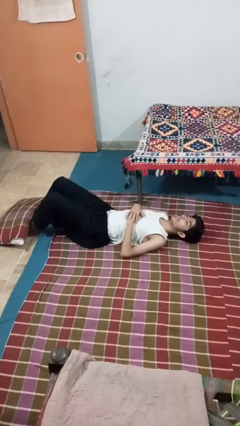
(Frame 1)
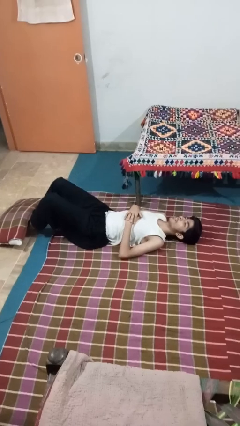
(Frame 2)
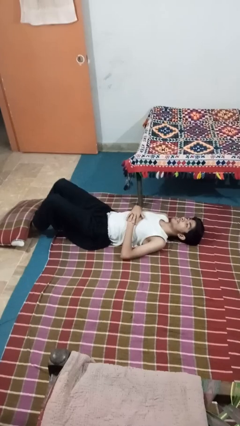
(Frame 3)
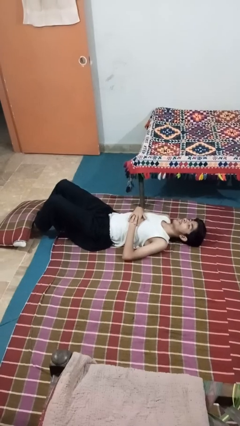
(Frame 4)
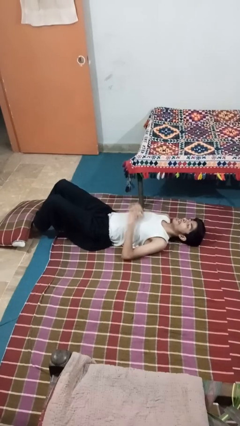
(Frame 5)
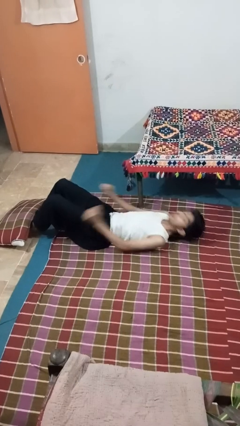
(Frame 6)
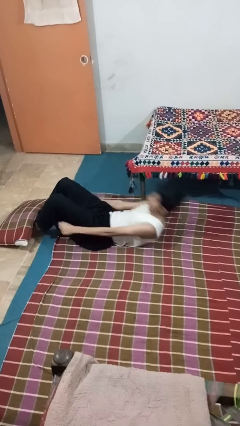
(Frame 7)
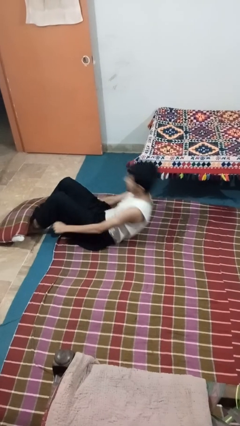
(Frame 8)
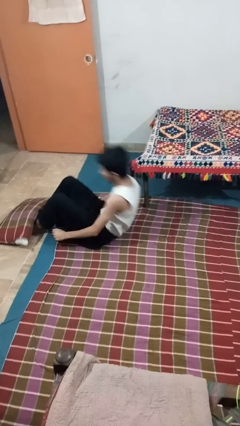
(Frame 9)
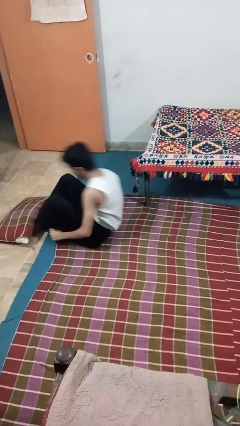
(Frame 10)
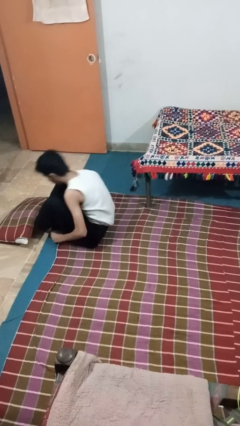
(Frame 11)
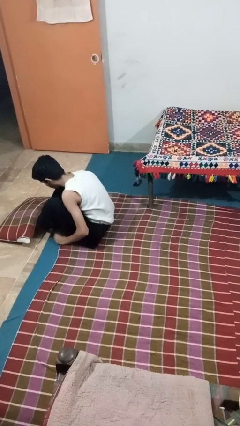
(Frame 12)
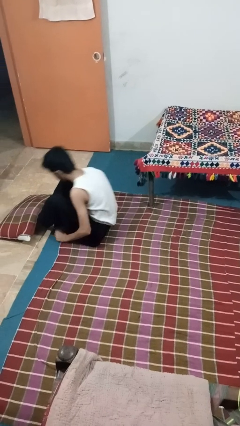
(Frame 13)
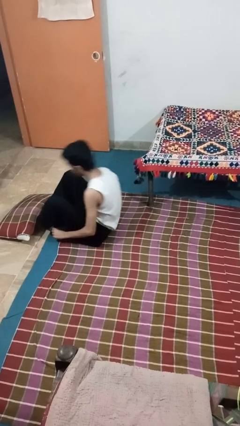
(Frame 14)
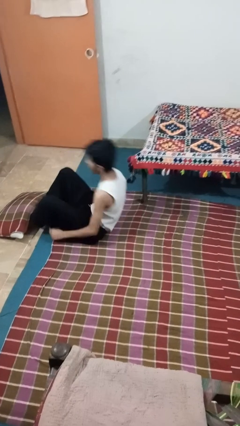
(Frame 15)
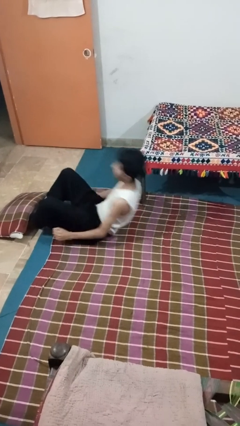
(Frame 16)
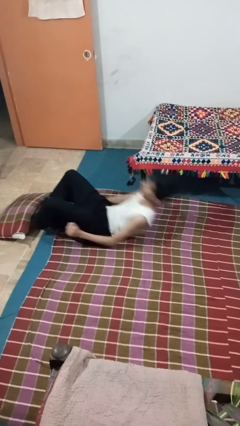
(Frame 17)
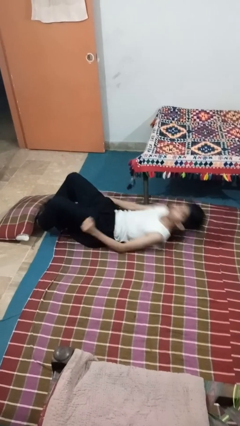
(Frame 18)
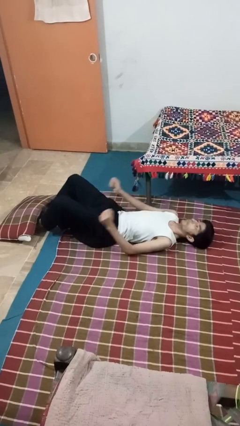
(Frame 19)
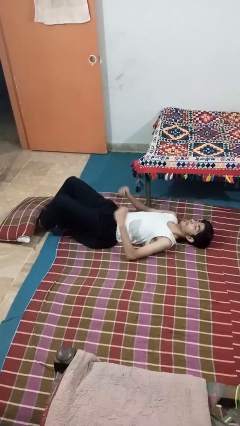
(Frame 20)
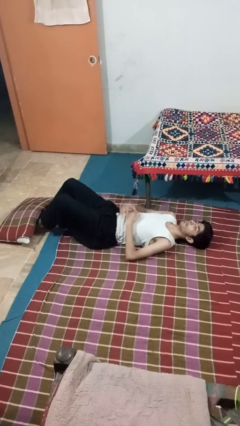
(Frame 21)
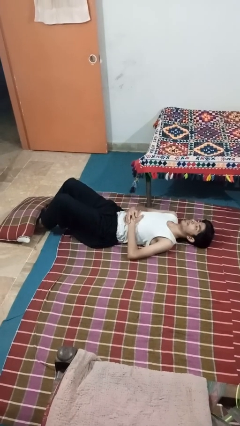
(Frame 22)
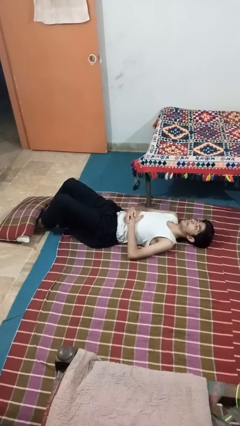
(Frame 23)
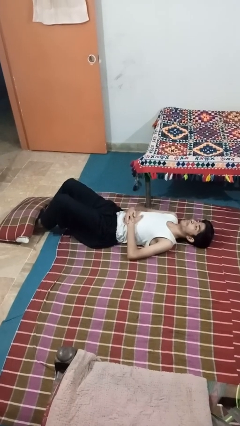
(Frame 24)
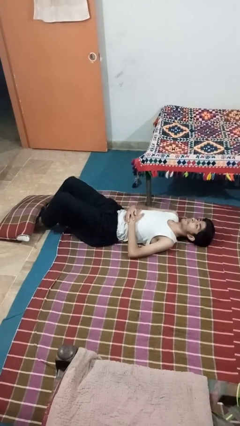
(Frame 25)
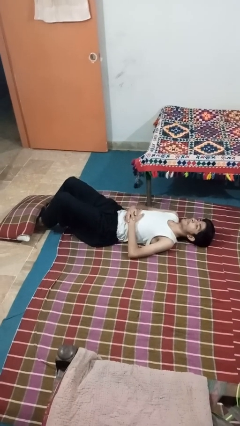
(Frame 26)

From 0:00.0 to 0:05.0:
person exercises with situp

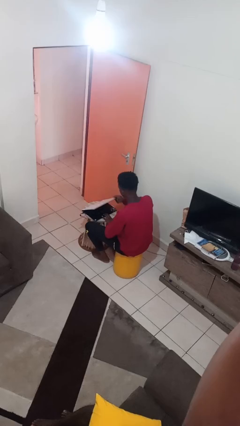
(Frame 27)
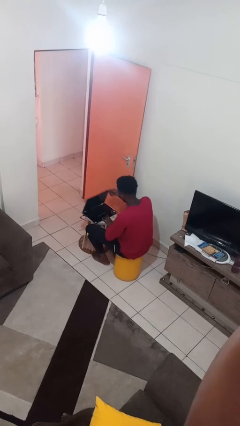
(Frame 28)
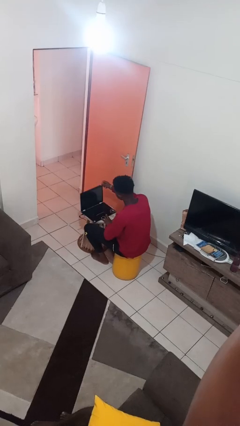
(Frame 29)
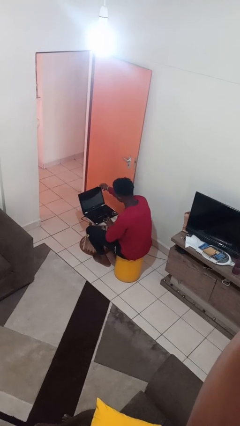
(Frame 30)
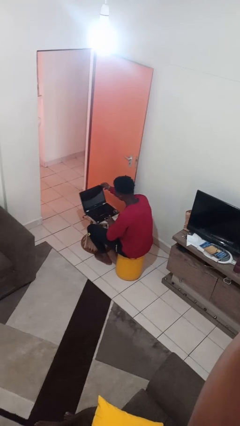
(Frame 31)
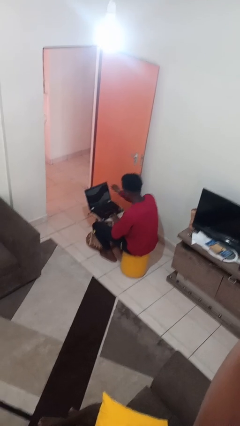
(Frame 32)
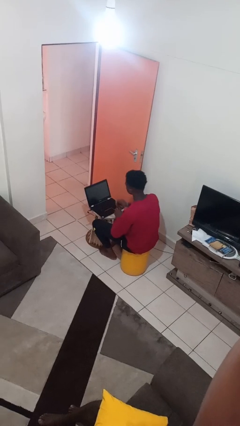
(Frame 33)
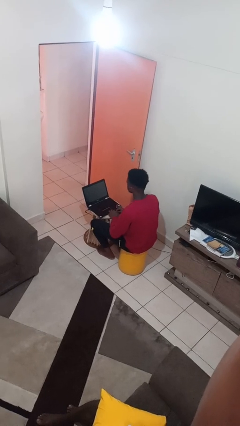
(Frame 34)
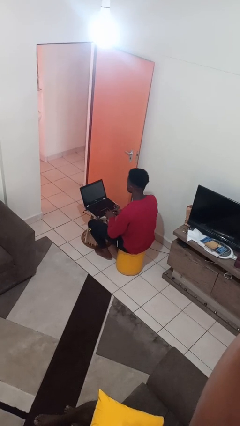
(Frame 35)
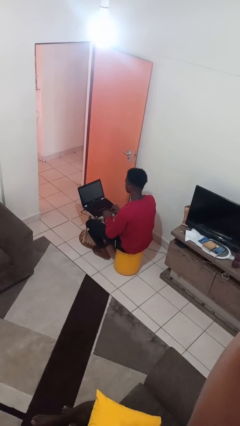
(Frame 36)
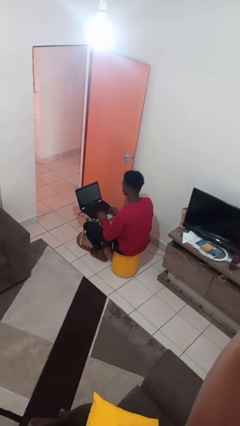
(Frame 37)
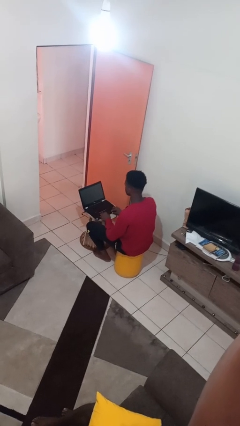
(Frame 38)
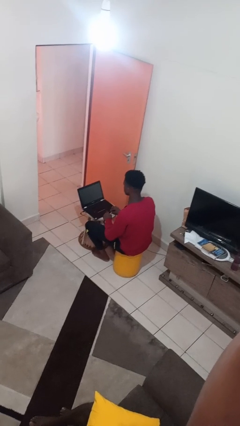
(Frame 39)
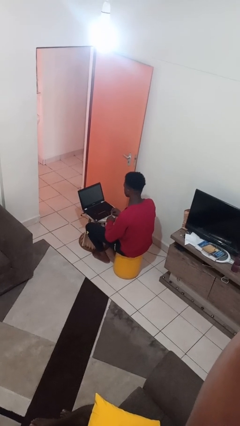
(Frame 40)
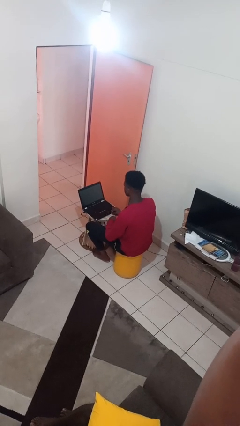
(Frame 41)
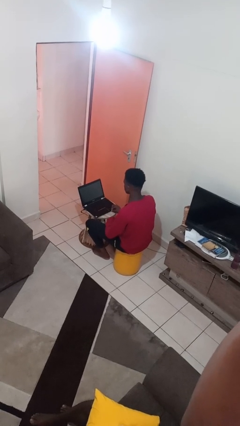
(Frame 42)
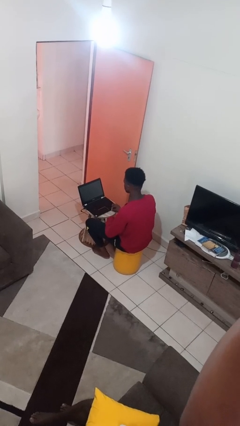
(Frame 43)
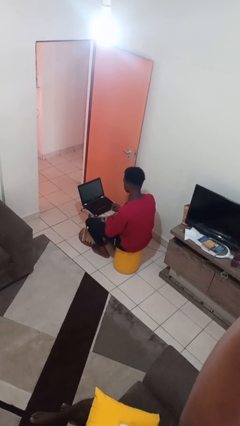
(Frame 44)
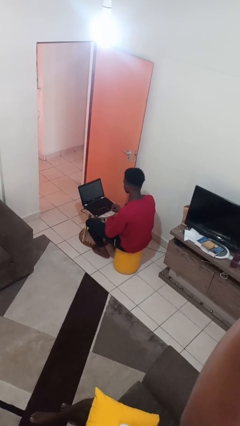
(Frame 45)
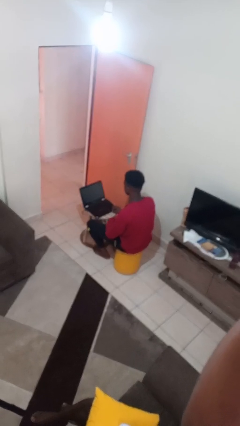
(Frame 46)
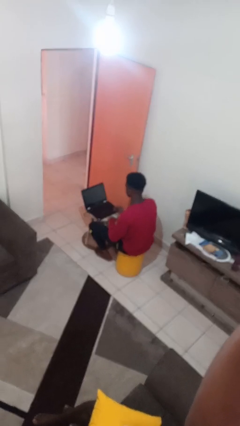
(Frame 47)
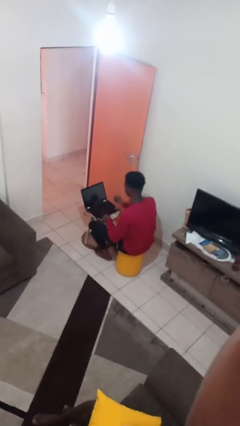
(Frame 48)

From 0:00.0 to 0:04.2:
person opens laptop

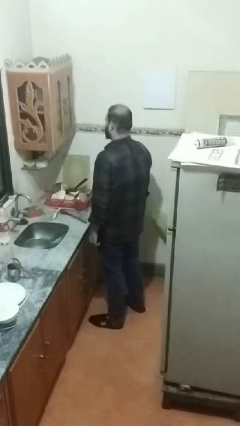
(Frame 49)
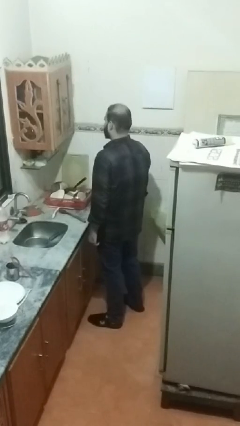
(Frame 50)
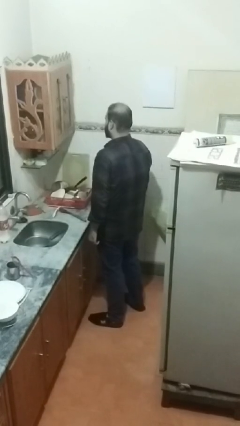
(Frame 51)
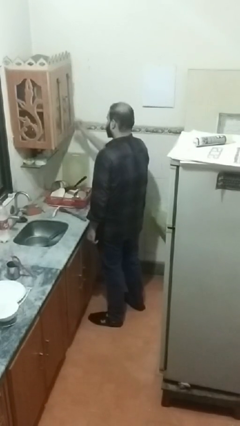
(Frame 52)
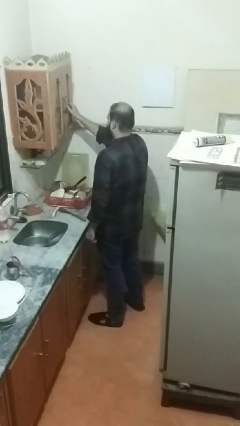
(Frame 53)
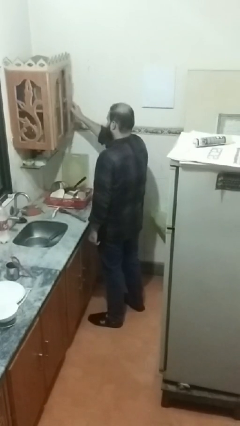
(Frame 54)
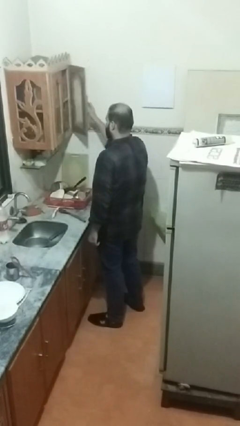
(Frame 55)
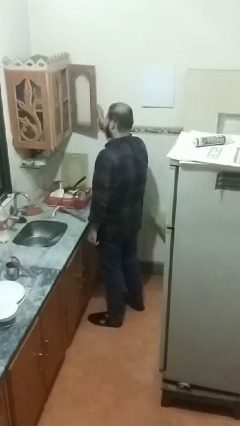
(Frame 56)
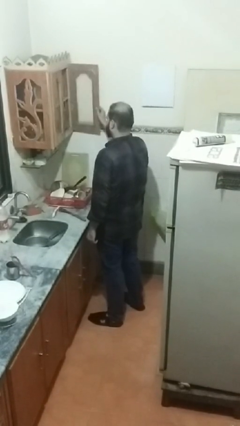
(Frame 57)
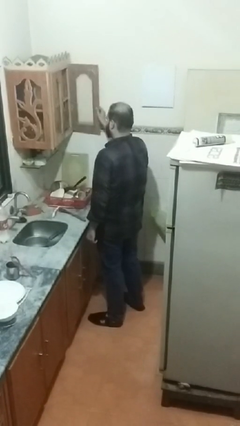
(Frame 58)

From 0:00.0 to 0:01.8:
person opens kitchen drawer

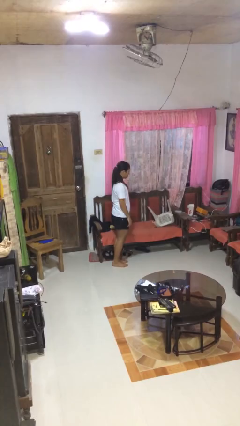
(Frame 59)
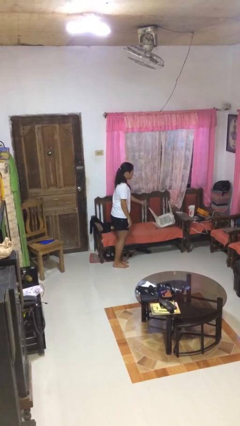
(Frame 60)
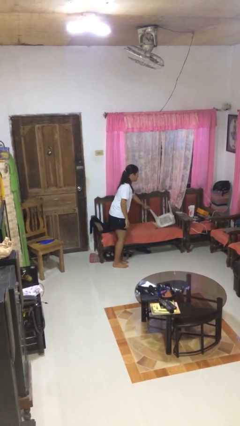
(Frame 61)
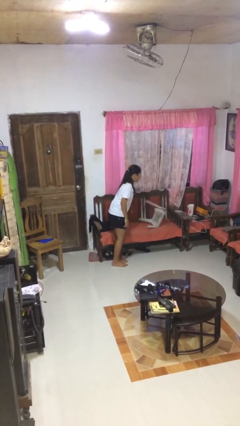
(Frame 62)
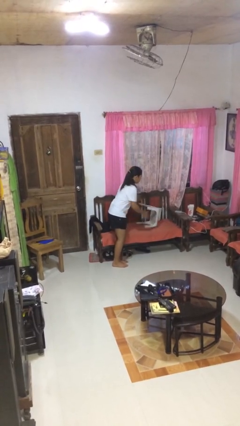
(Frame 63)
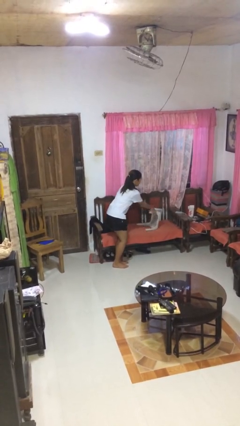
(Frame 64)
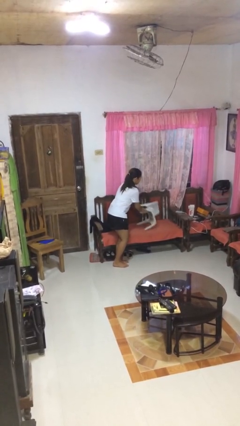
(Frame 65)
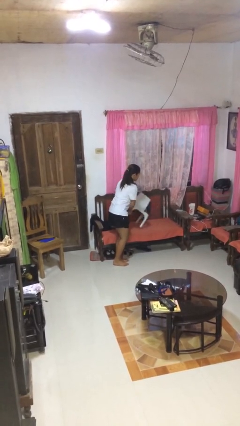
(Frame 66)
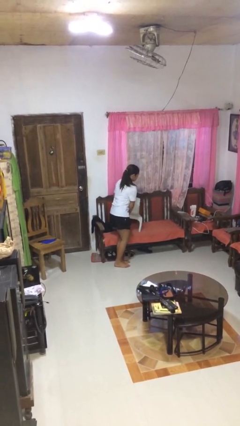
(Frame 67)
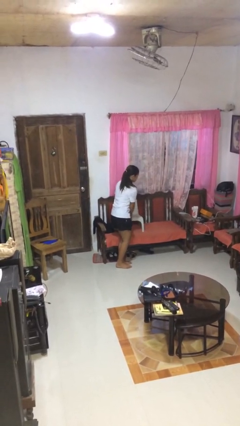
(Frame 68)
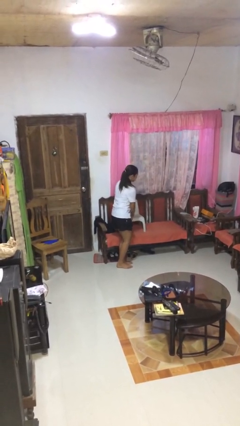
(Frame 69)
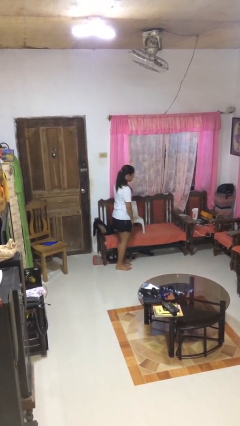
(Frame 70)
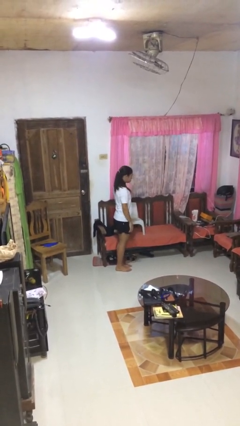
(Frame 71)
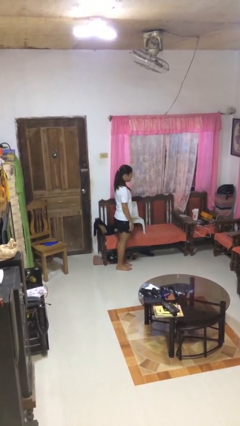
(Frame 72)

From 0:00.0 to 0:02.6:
person sets upright furniture

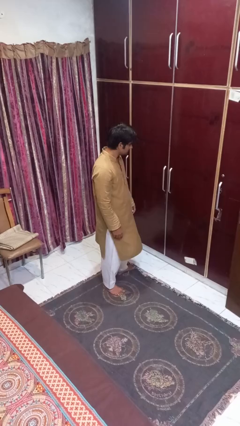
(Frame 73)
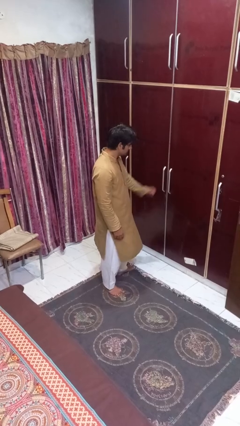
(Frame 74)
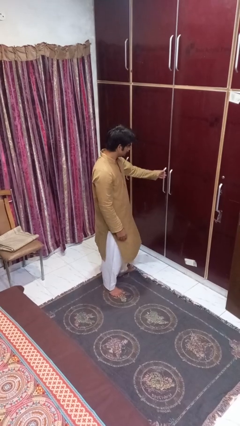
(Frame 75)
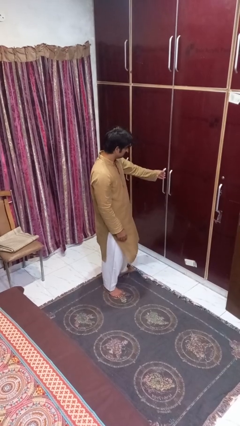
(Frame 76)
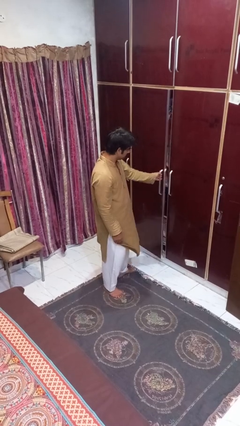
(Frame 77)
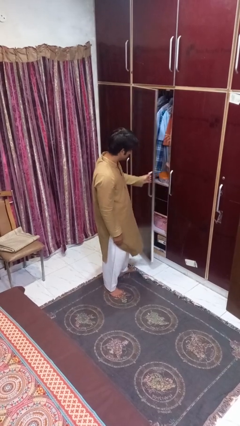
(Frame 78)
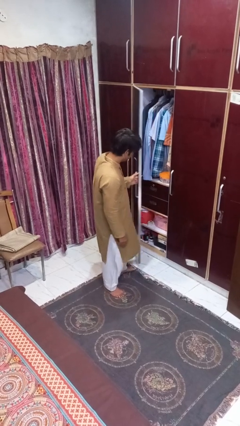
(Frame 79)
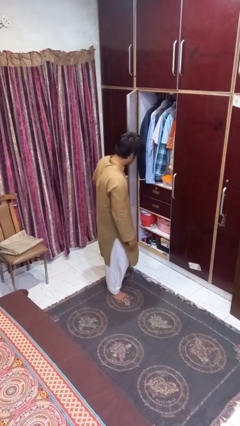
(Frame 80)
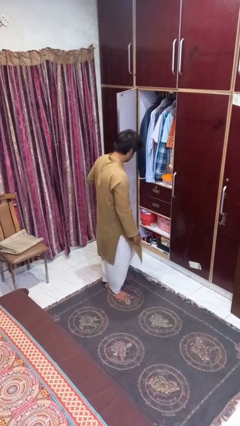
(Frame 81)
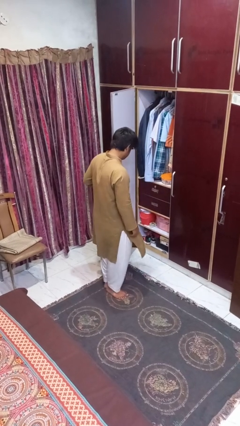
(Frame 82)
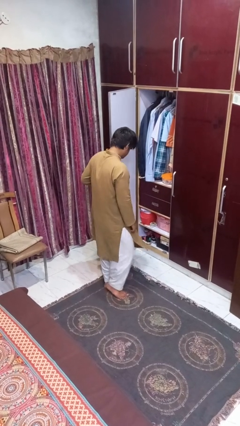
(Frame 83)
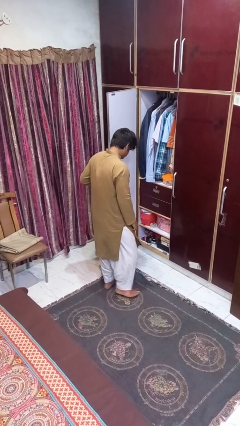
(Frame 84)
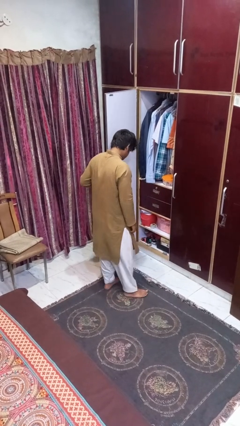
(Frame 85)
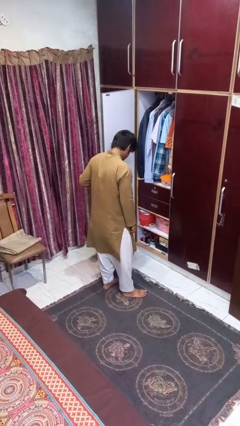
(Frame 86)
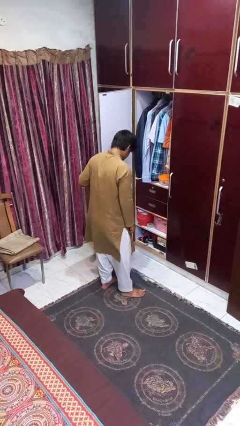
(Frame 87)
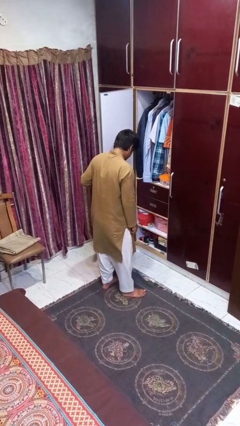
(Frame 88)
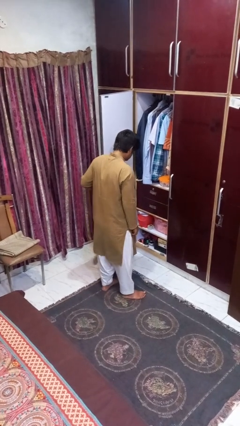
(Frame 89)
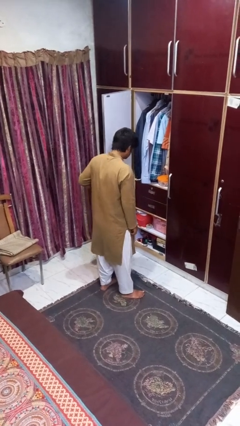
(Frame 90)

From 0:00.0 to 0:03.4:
person opens closet door

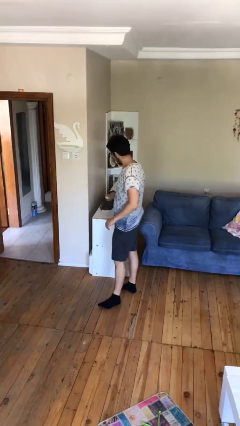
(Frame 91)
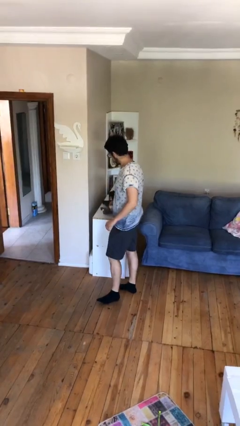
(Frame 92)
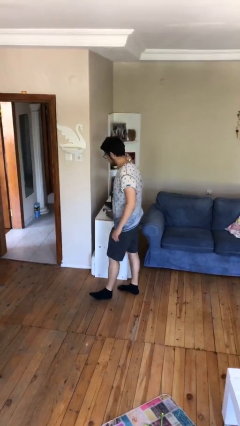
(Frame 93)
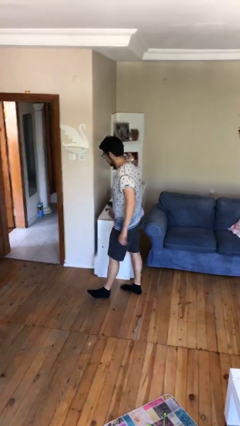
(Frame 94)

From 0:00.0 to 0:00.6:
person puts down object on table
